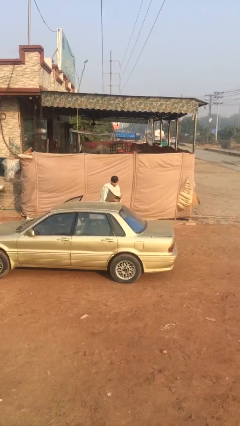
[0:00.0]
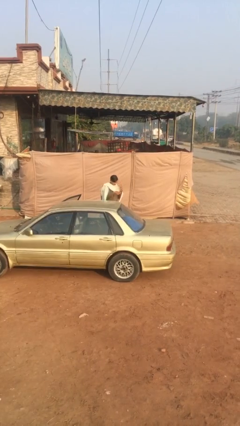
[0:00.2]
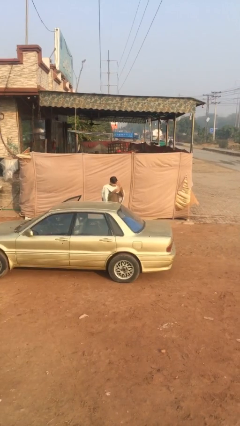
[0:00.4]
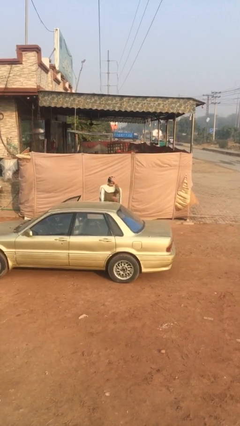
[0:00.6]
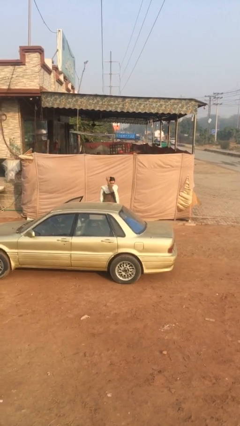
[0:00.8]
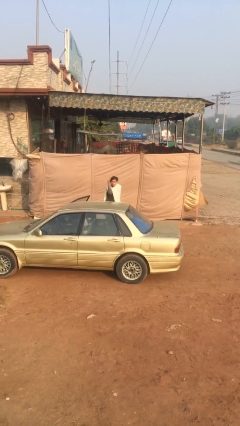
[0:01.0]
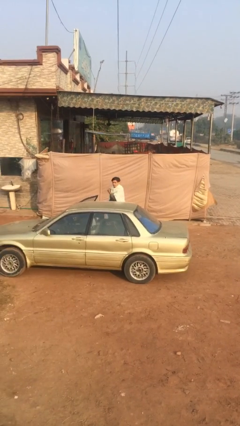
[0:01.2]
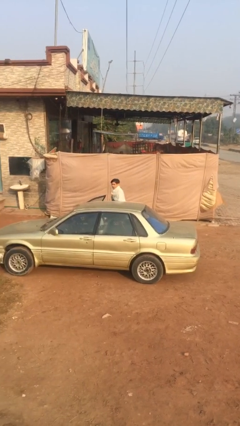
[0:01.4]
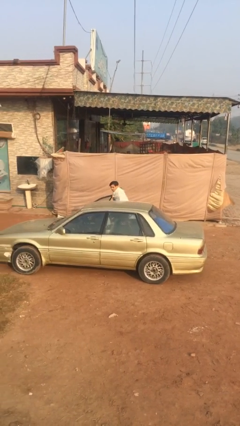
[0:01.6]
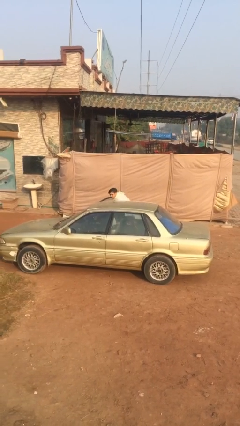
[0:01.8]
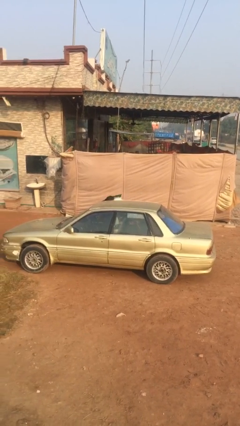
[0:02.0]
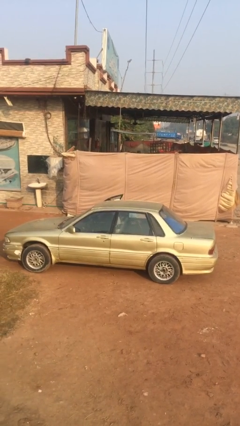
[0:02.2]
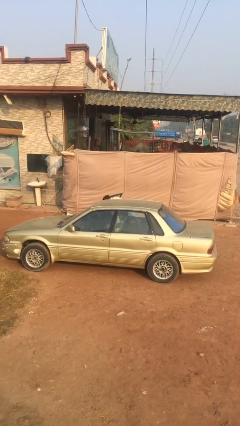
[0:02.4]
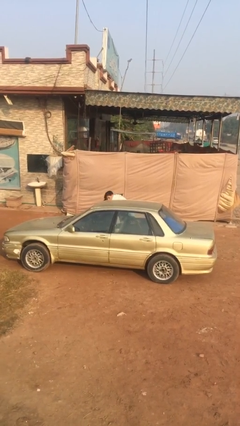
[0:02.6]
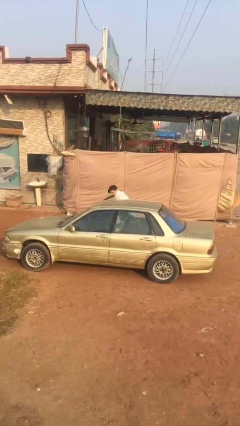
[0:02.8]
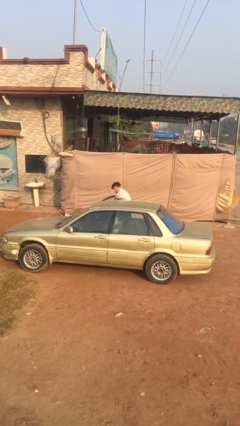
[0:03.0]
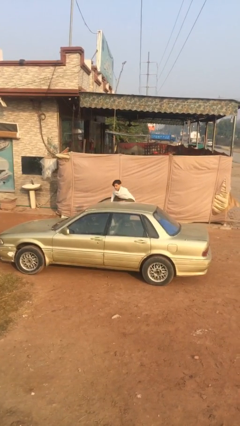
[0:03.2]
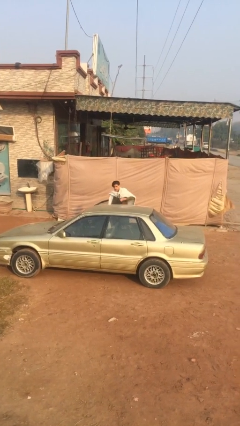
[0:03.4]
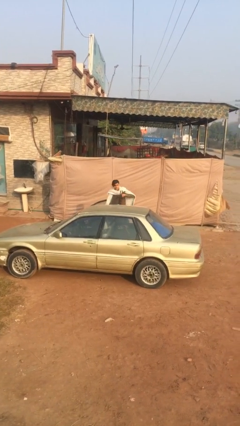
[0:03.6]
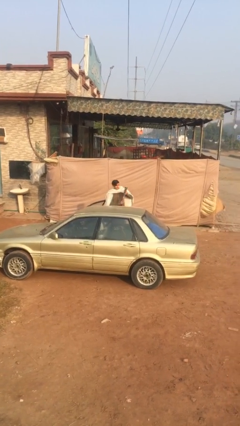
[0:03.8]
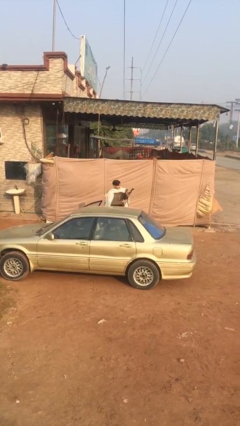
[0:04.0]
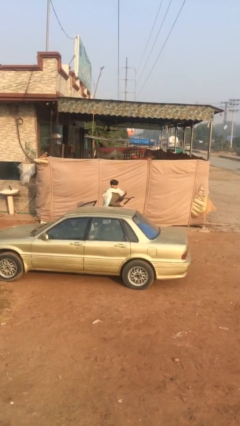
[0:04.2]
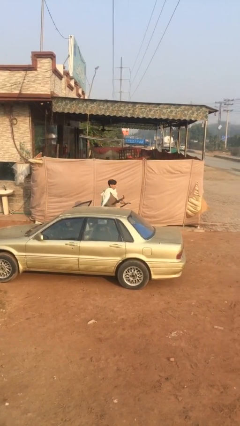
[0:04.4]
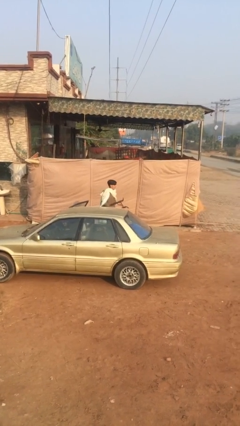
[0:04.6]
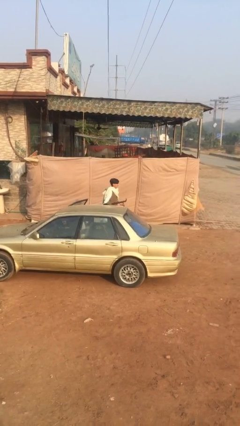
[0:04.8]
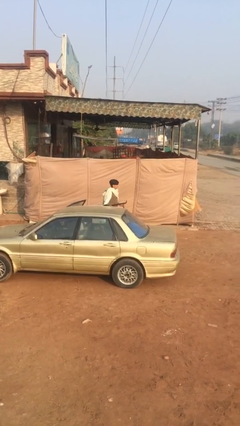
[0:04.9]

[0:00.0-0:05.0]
person unloads car

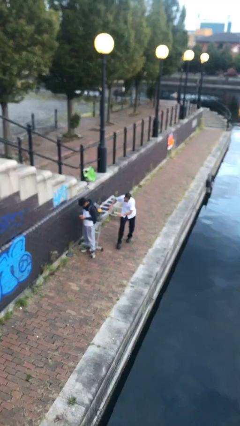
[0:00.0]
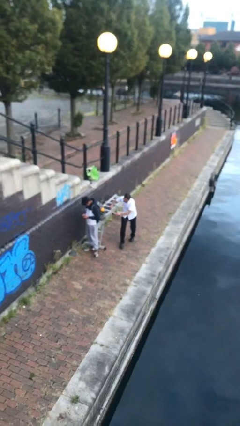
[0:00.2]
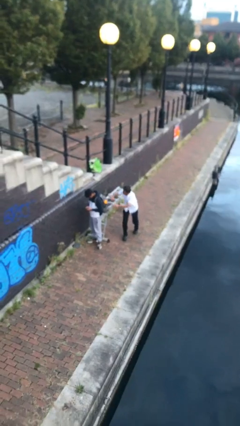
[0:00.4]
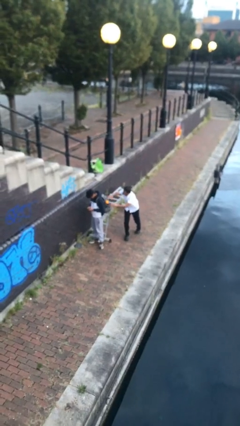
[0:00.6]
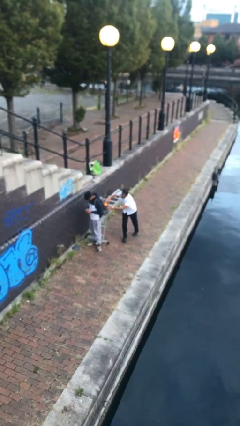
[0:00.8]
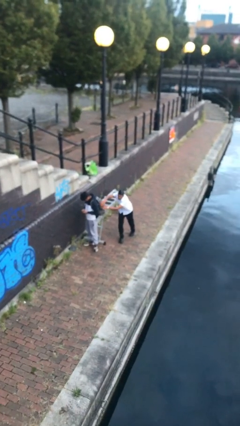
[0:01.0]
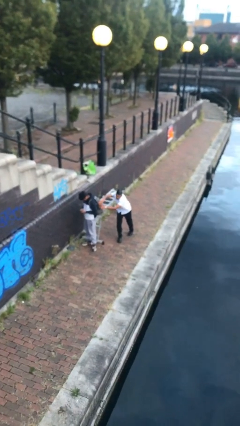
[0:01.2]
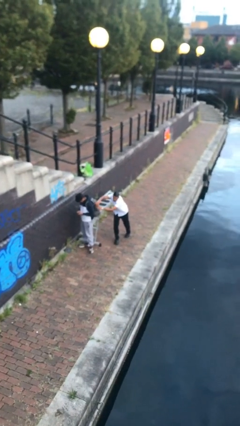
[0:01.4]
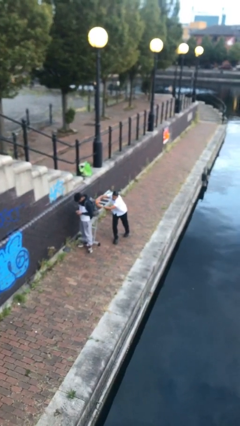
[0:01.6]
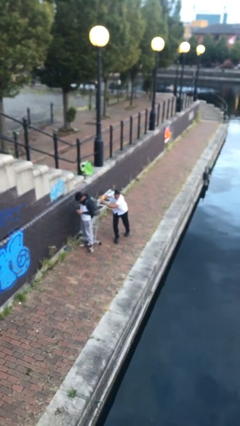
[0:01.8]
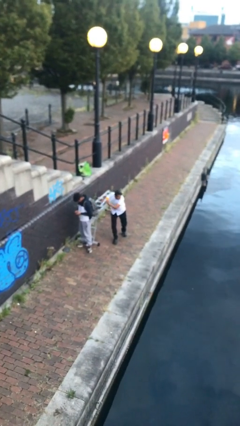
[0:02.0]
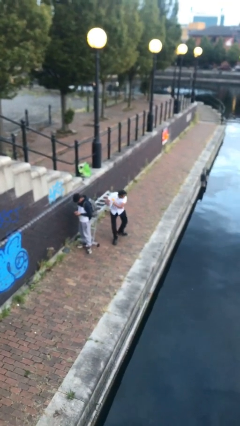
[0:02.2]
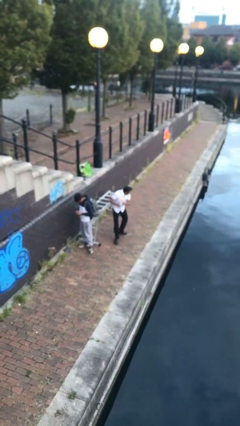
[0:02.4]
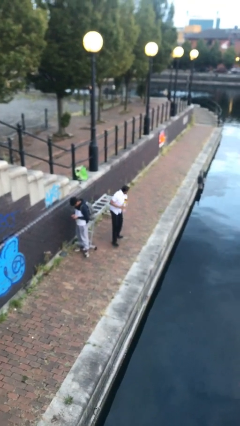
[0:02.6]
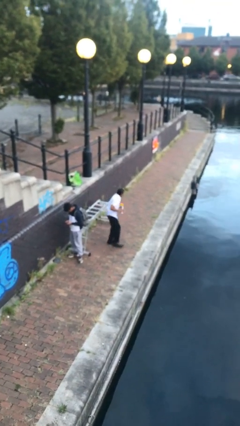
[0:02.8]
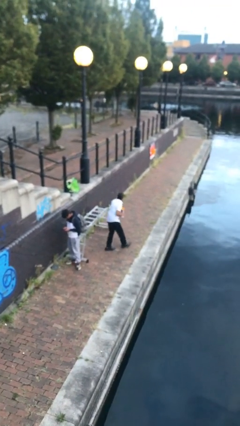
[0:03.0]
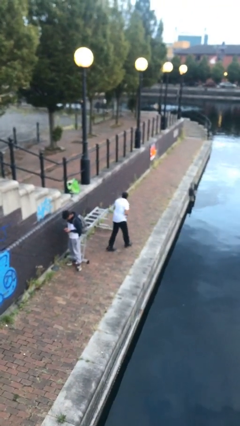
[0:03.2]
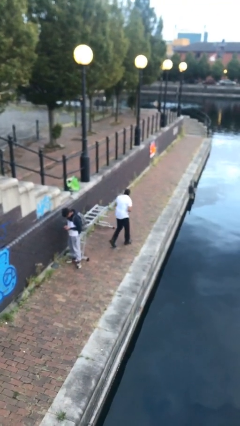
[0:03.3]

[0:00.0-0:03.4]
person steals object from person

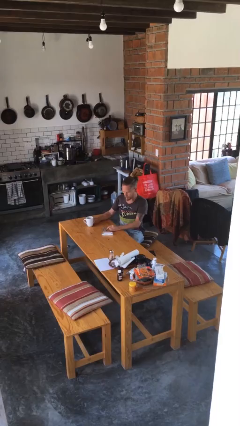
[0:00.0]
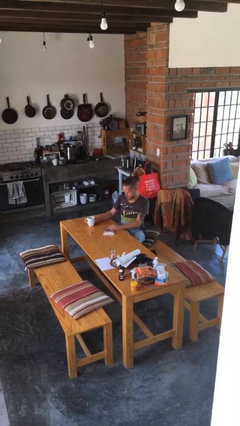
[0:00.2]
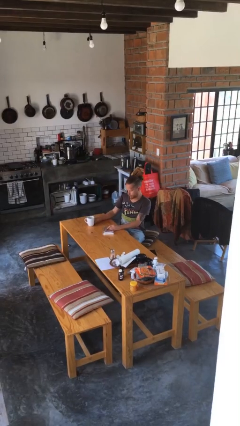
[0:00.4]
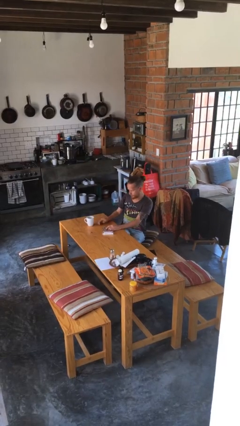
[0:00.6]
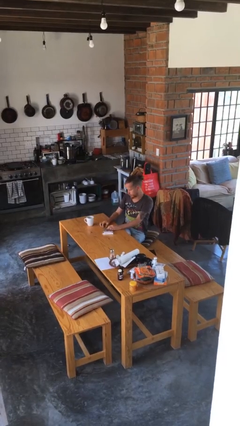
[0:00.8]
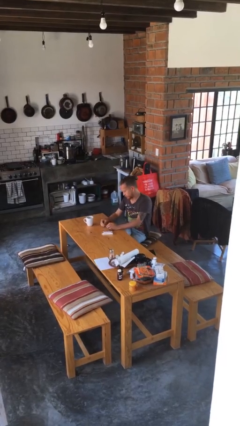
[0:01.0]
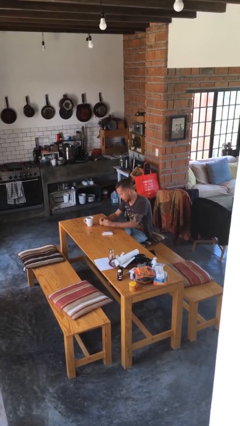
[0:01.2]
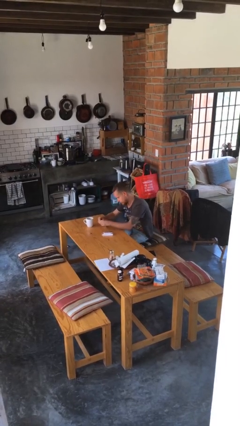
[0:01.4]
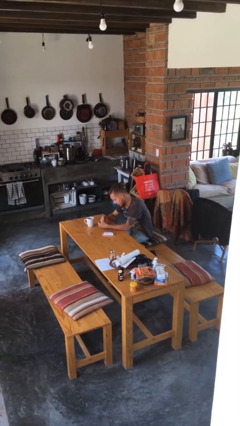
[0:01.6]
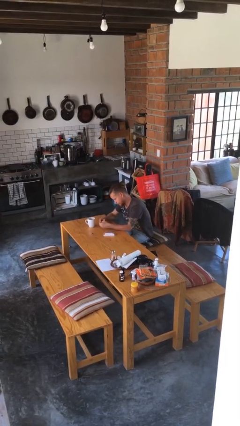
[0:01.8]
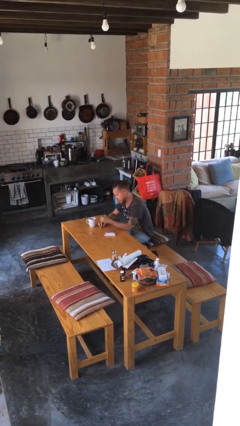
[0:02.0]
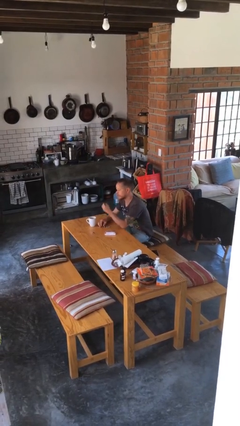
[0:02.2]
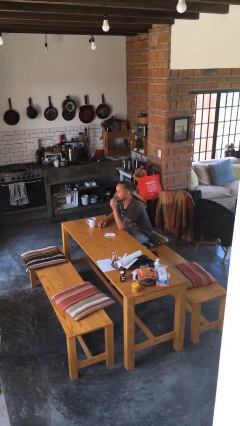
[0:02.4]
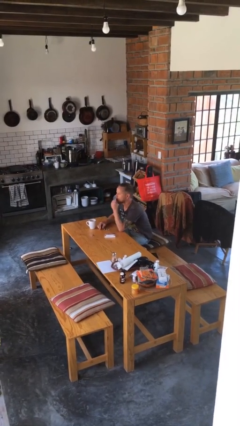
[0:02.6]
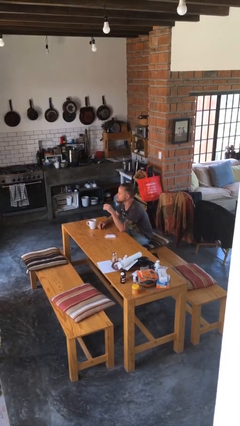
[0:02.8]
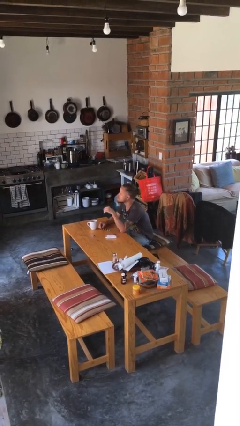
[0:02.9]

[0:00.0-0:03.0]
person takes medicine pills

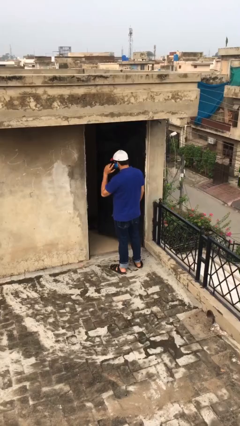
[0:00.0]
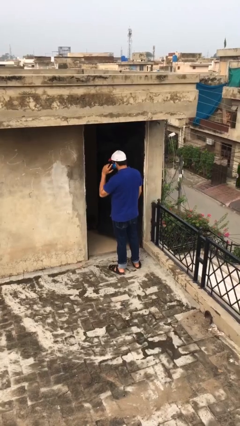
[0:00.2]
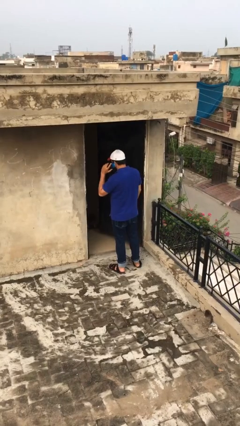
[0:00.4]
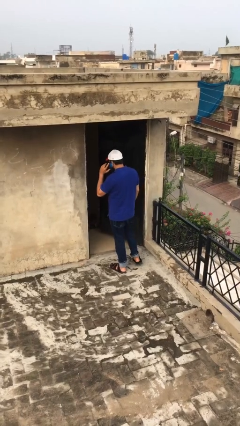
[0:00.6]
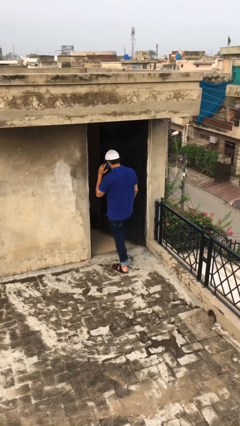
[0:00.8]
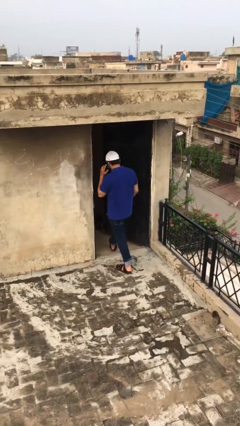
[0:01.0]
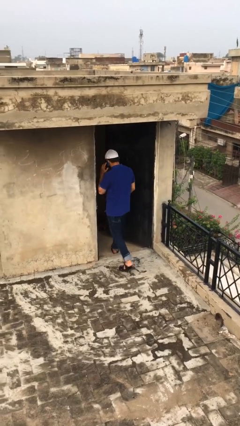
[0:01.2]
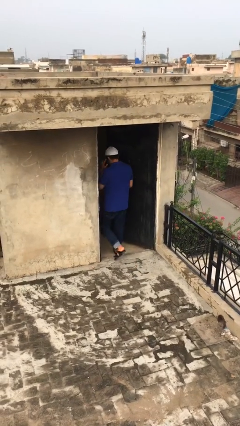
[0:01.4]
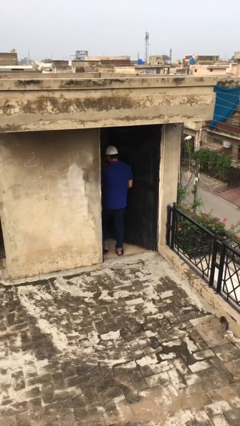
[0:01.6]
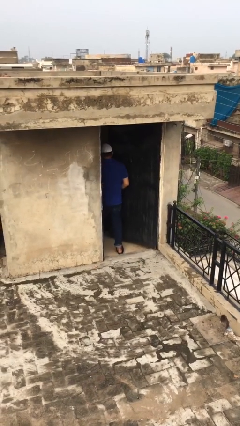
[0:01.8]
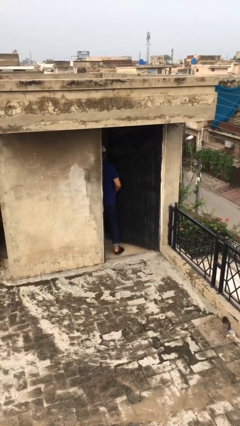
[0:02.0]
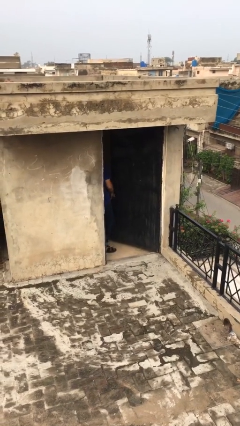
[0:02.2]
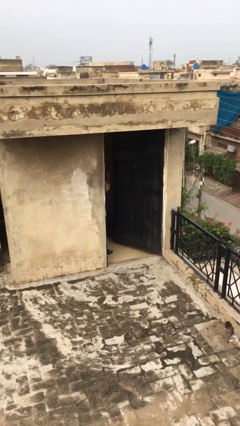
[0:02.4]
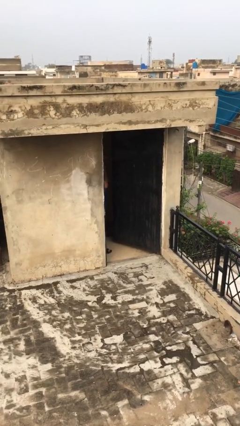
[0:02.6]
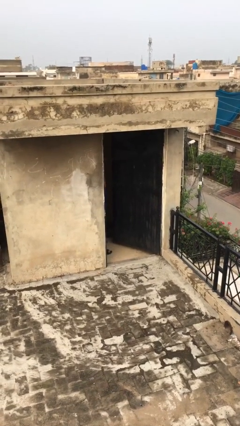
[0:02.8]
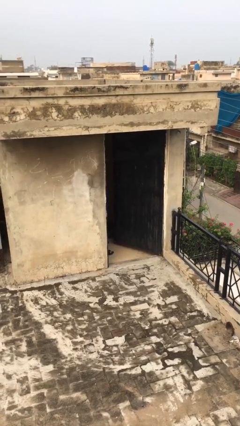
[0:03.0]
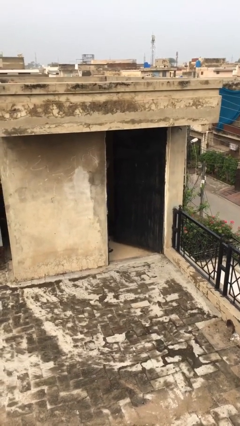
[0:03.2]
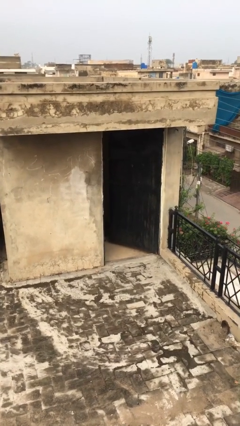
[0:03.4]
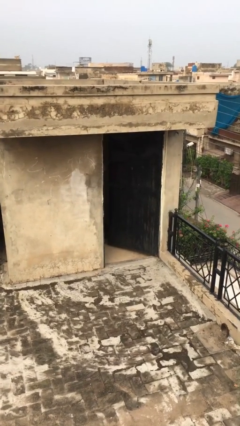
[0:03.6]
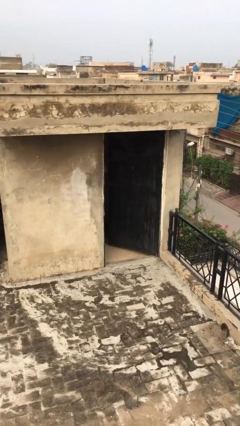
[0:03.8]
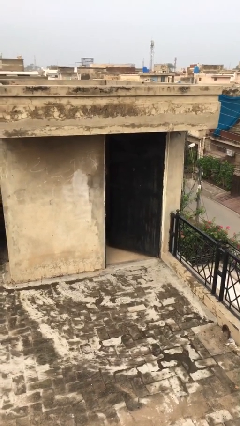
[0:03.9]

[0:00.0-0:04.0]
person exits scene through structure

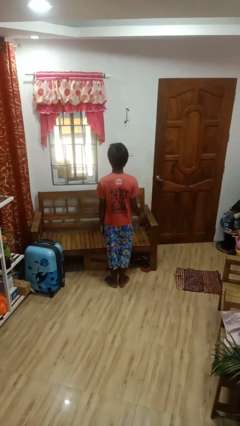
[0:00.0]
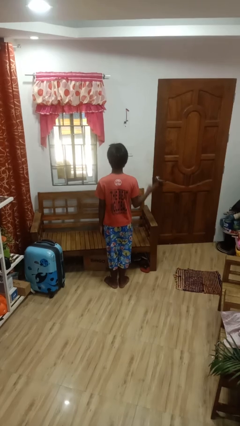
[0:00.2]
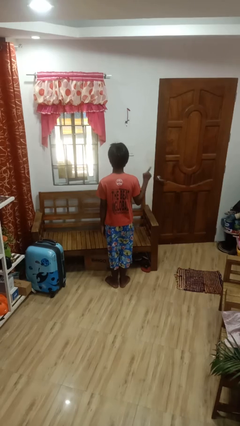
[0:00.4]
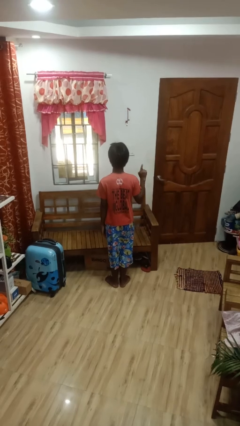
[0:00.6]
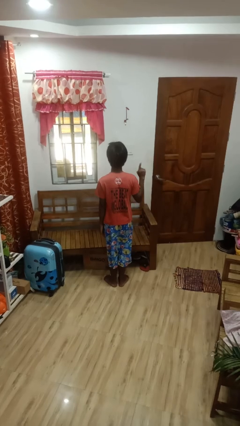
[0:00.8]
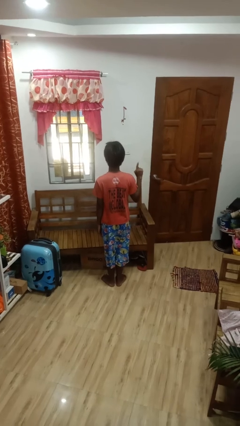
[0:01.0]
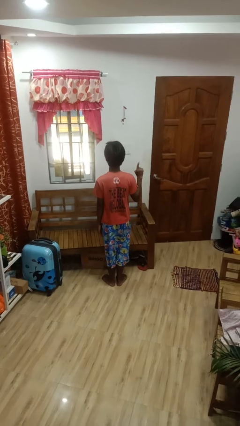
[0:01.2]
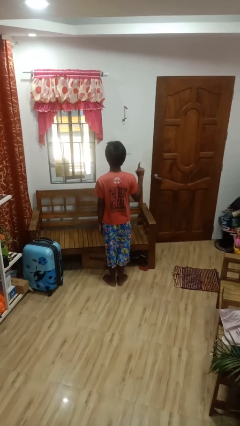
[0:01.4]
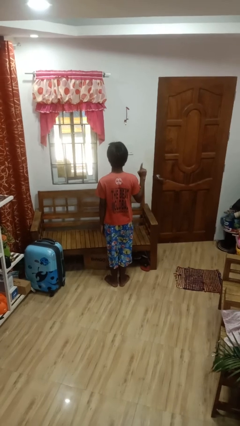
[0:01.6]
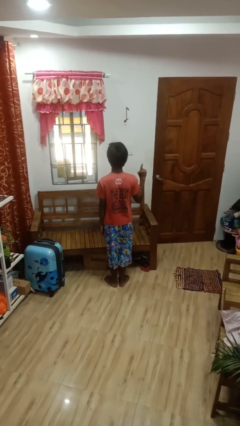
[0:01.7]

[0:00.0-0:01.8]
person gestures number one
